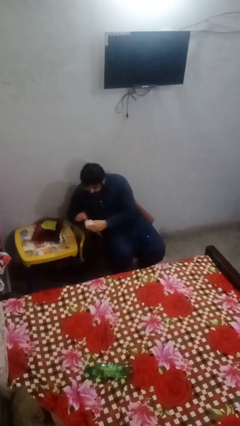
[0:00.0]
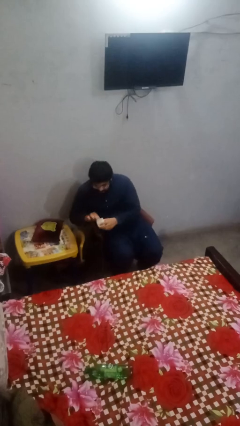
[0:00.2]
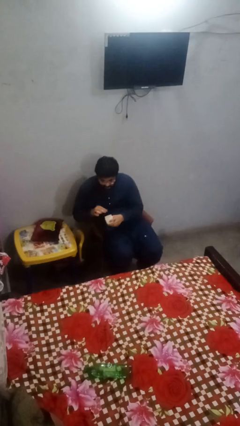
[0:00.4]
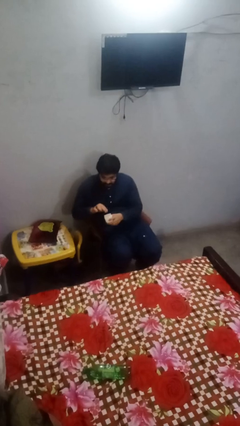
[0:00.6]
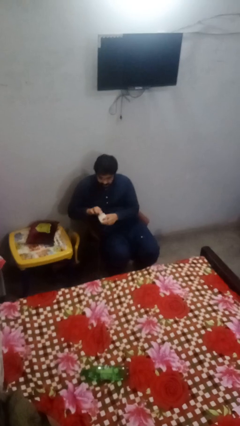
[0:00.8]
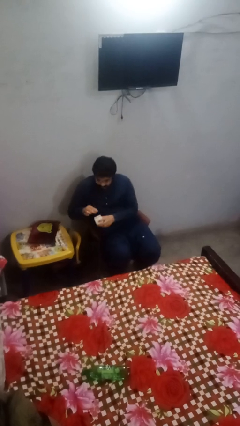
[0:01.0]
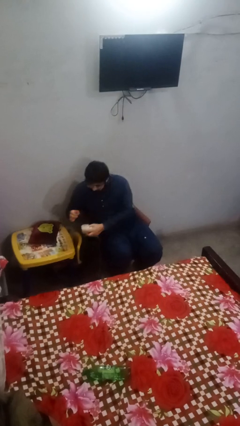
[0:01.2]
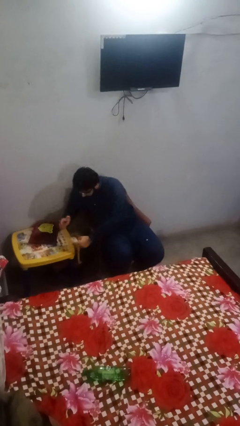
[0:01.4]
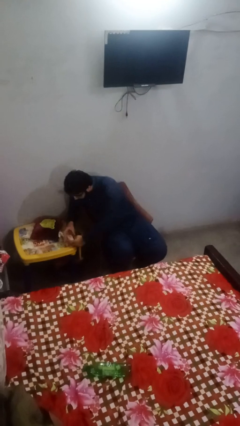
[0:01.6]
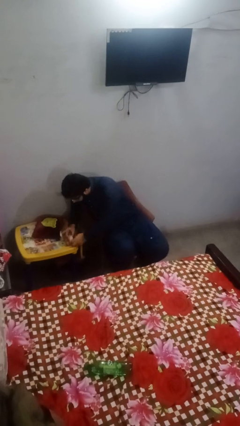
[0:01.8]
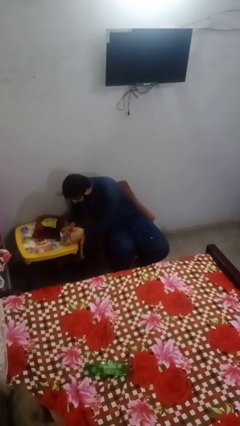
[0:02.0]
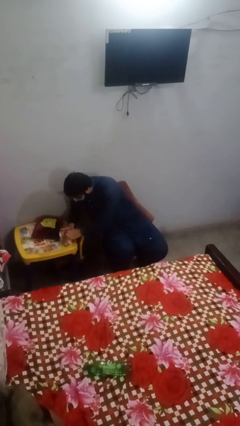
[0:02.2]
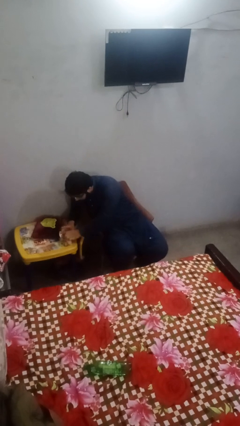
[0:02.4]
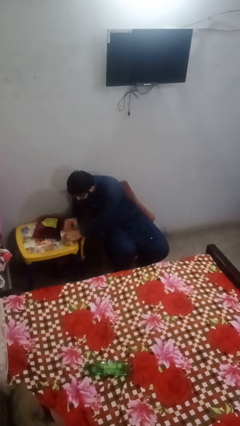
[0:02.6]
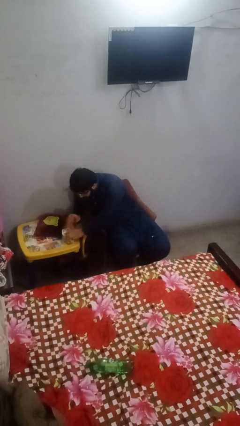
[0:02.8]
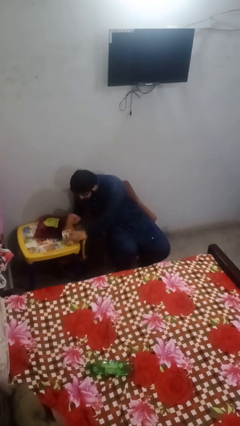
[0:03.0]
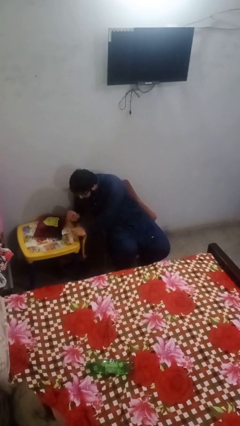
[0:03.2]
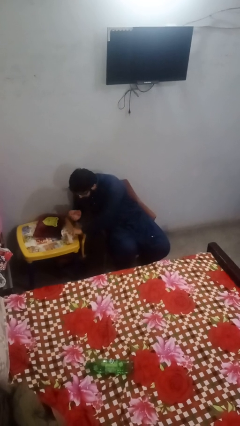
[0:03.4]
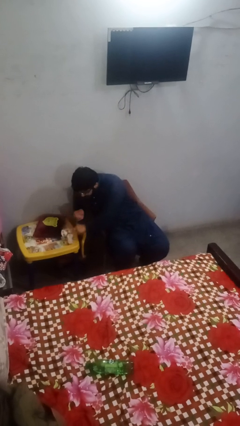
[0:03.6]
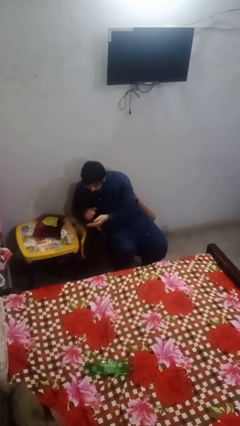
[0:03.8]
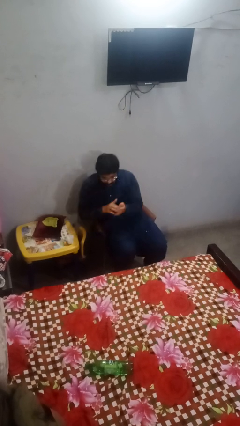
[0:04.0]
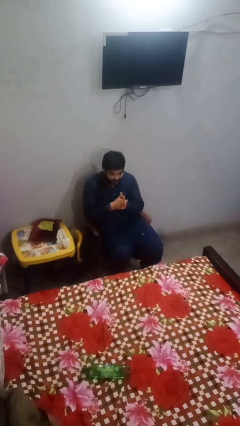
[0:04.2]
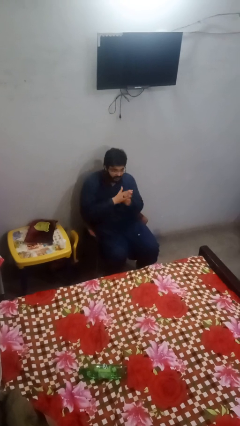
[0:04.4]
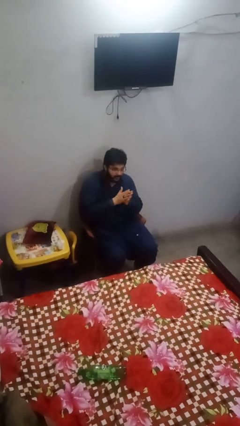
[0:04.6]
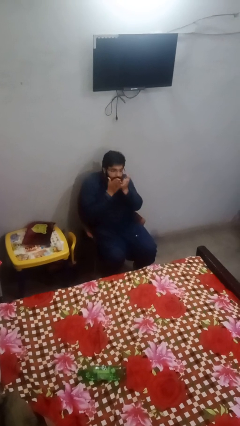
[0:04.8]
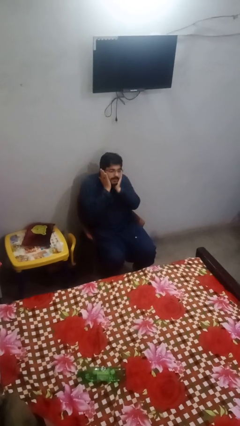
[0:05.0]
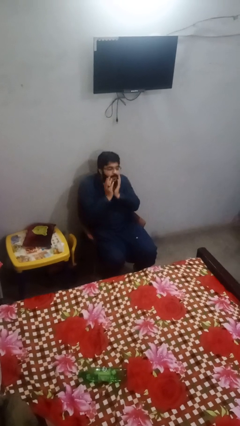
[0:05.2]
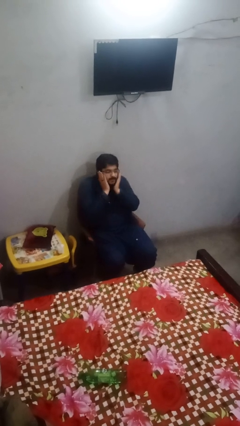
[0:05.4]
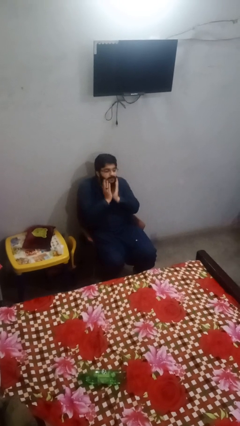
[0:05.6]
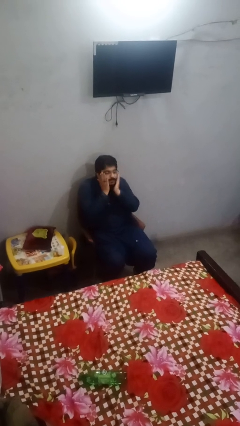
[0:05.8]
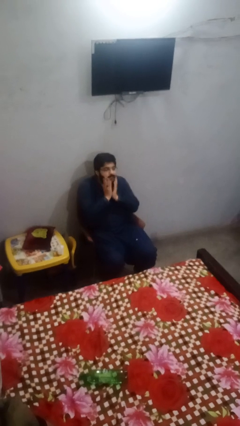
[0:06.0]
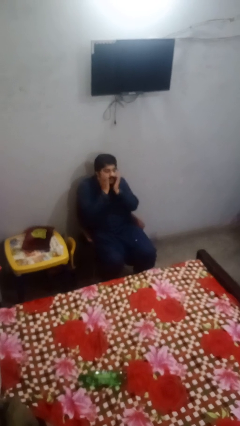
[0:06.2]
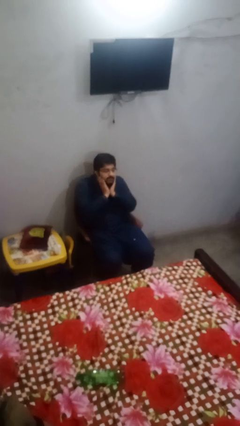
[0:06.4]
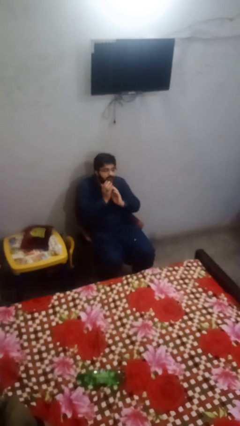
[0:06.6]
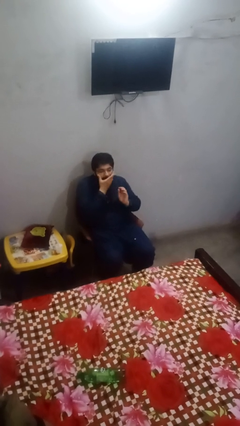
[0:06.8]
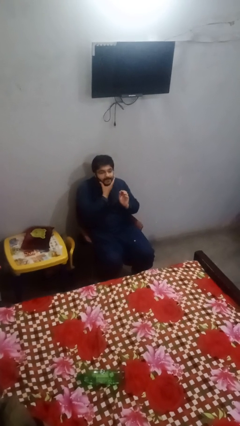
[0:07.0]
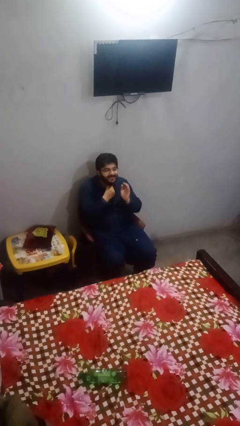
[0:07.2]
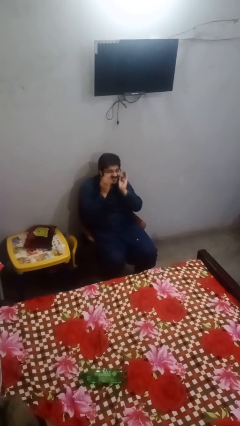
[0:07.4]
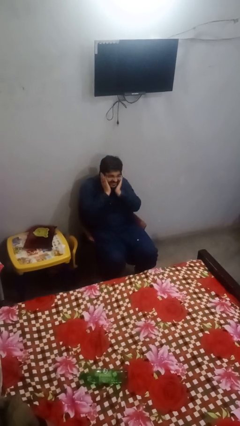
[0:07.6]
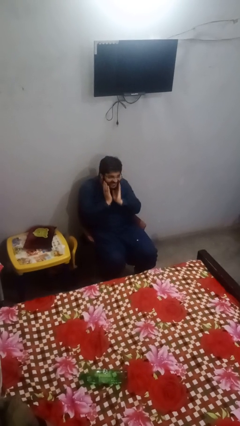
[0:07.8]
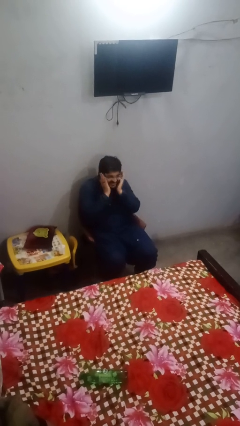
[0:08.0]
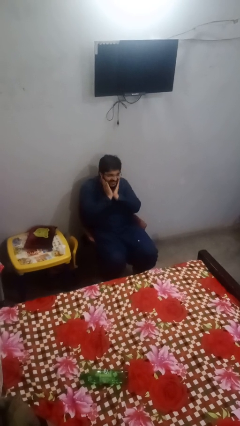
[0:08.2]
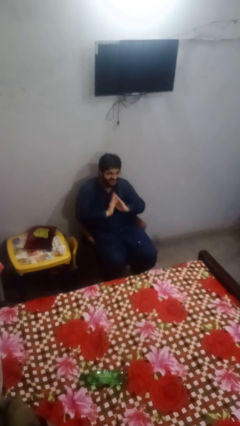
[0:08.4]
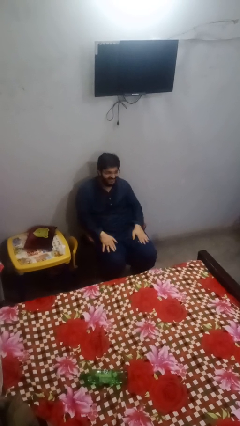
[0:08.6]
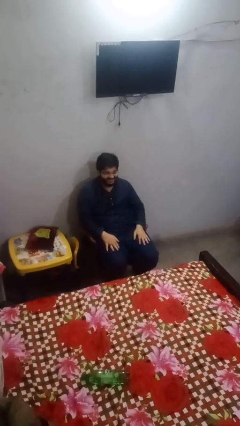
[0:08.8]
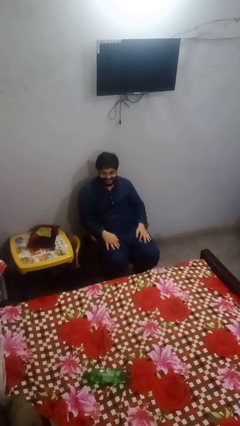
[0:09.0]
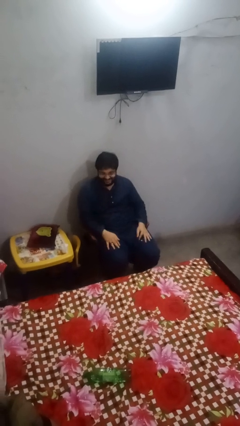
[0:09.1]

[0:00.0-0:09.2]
person applies sunscreen

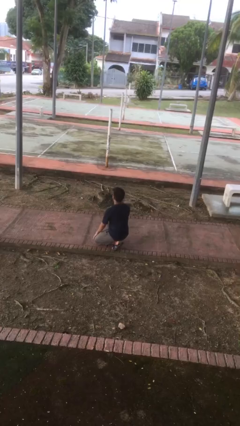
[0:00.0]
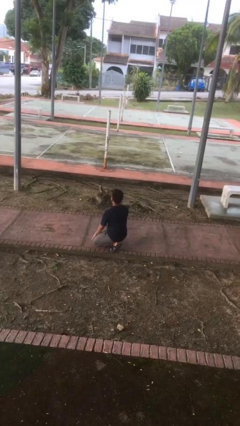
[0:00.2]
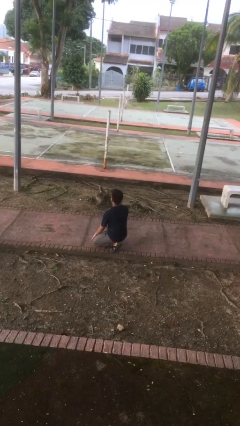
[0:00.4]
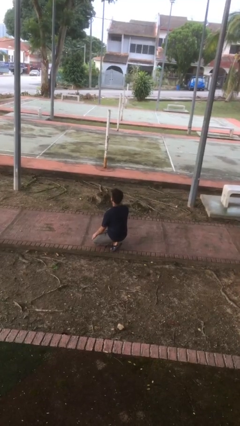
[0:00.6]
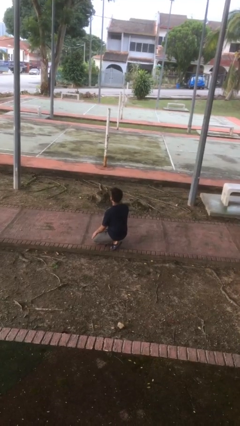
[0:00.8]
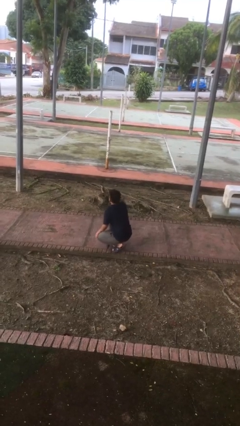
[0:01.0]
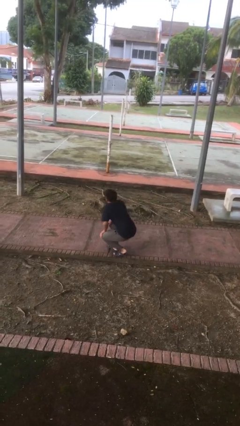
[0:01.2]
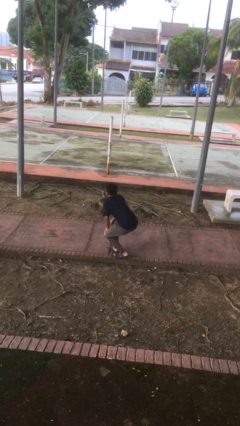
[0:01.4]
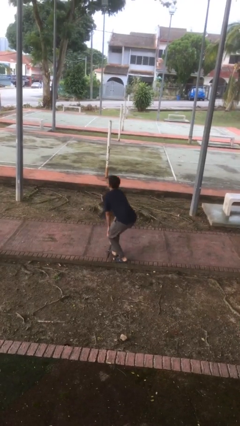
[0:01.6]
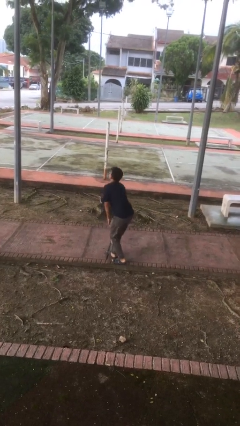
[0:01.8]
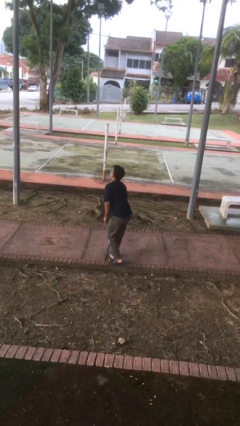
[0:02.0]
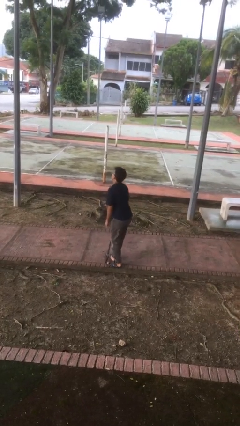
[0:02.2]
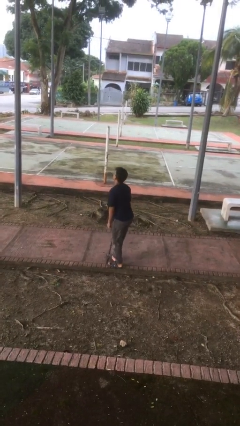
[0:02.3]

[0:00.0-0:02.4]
person stands up from floor

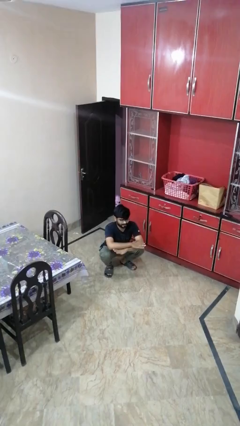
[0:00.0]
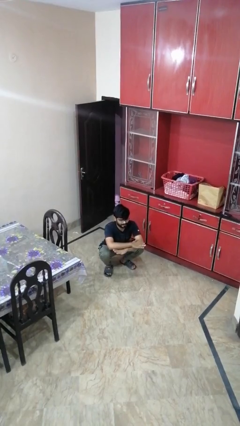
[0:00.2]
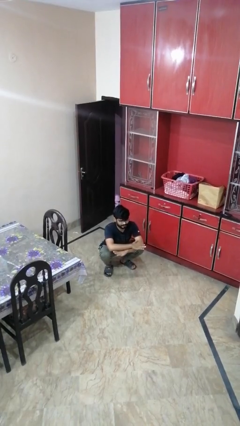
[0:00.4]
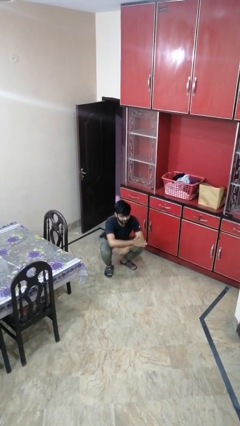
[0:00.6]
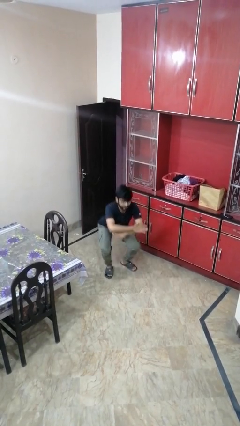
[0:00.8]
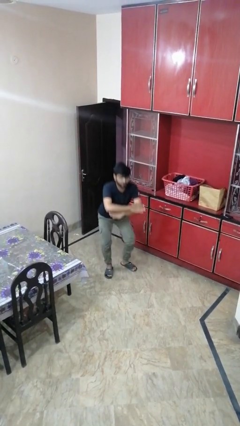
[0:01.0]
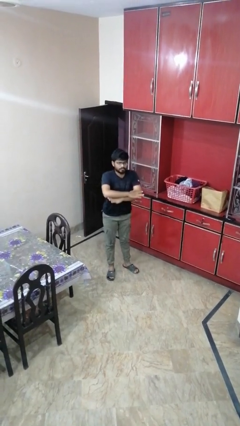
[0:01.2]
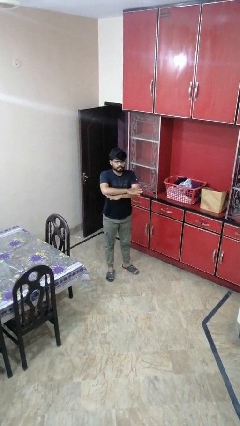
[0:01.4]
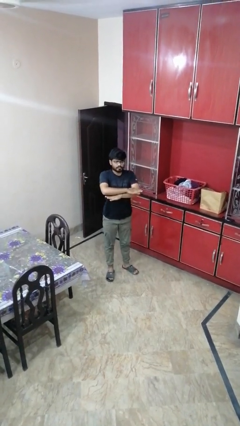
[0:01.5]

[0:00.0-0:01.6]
person stands up

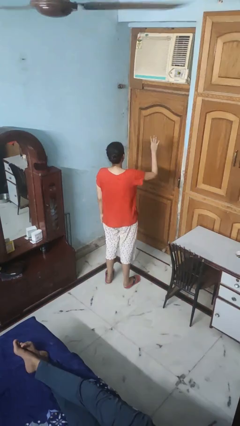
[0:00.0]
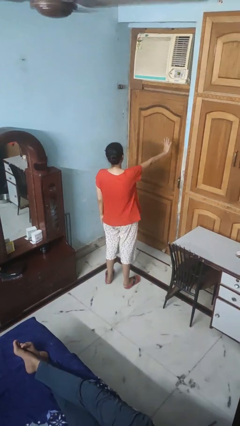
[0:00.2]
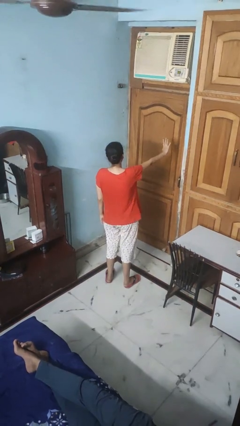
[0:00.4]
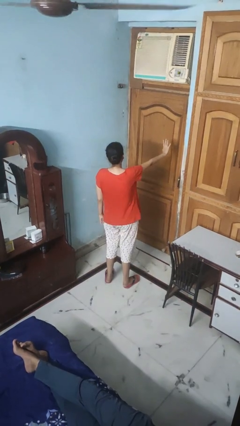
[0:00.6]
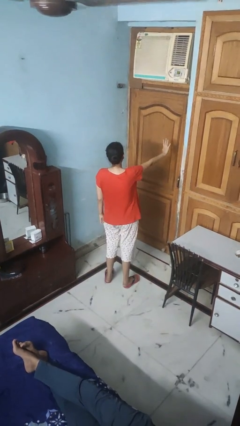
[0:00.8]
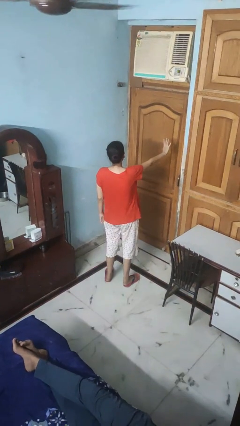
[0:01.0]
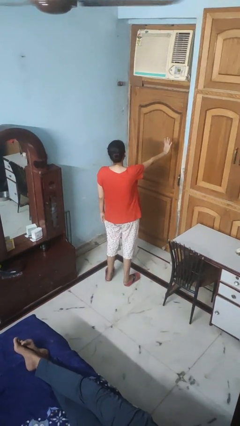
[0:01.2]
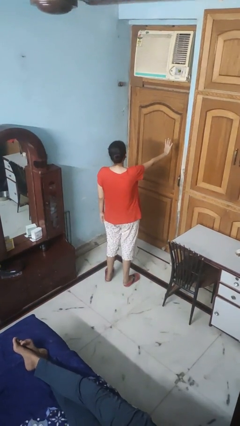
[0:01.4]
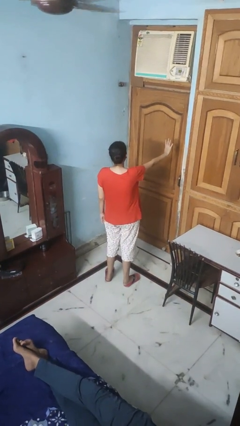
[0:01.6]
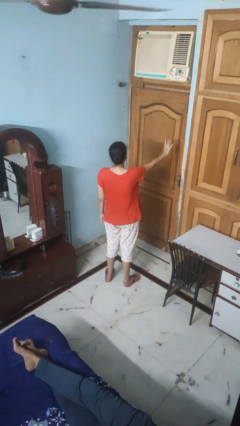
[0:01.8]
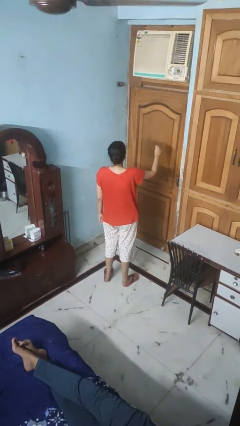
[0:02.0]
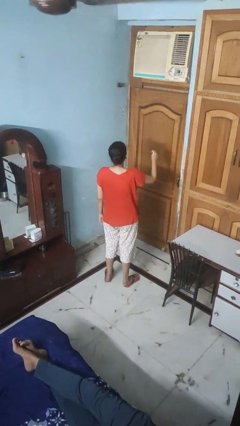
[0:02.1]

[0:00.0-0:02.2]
person gestures number four

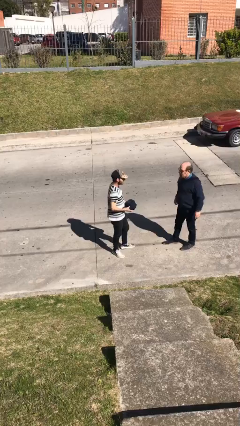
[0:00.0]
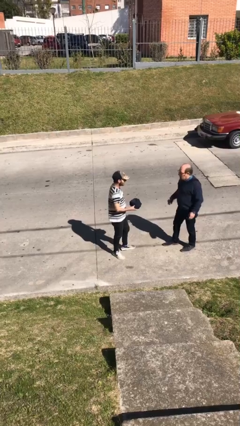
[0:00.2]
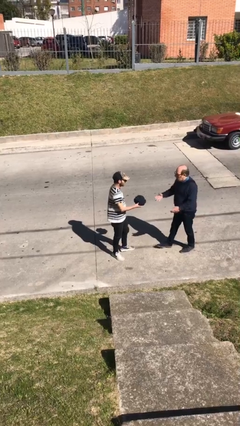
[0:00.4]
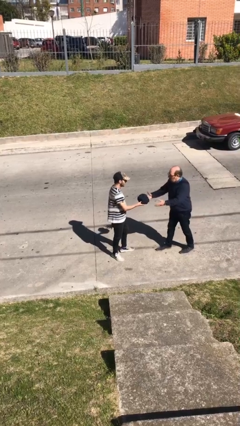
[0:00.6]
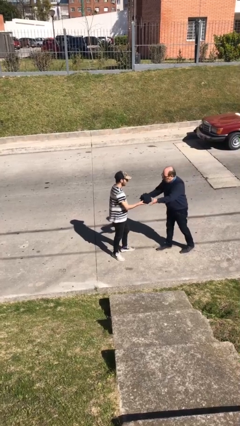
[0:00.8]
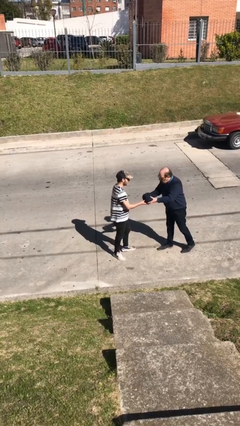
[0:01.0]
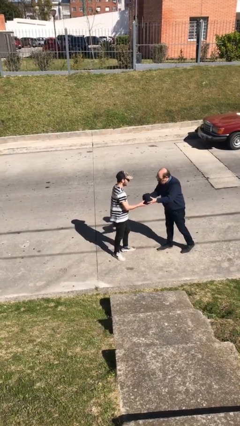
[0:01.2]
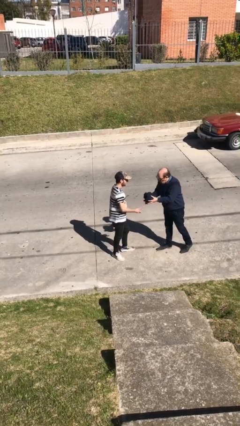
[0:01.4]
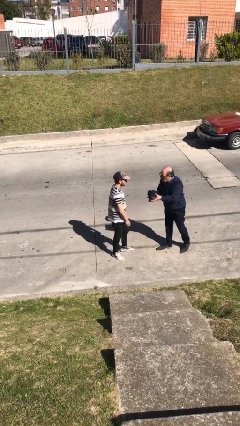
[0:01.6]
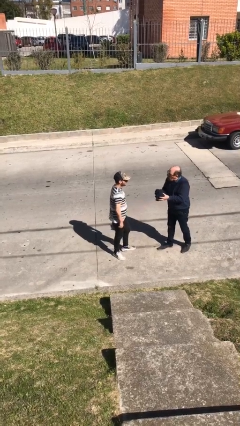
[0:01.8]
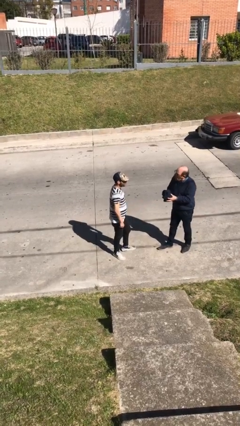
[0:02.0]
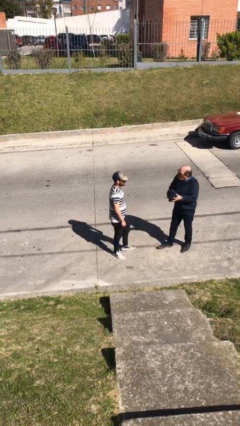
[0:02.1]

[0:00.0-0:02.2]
person transfers object to person
